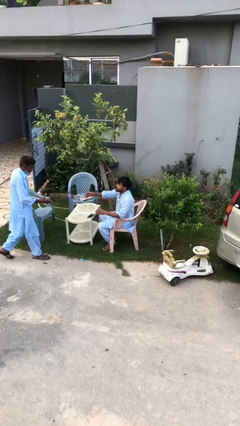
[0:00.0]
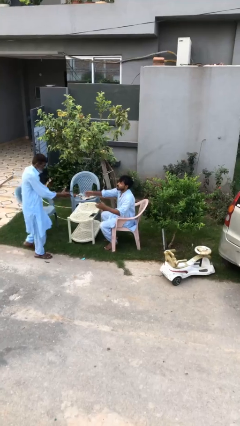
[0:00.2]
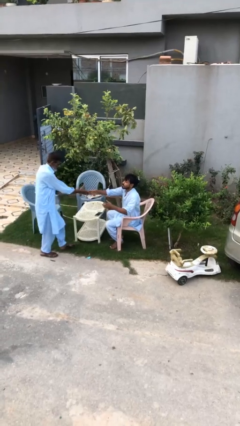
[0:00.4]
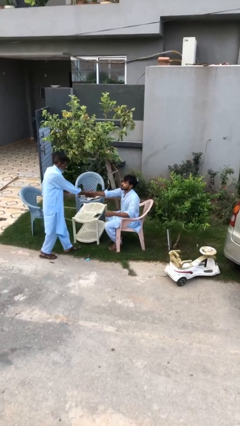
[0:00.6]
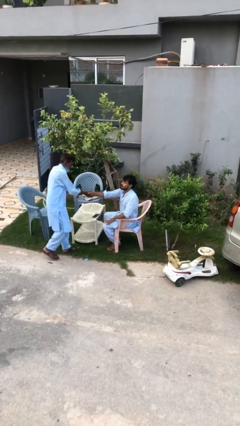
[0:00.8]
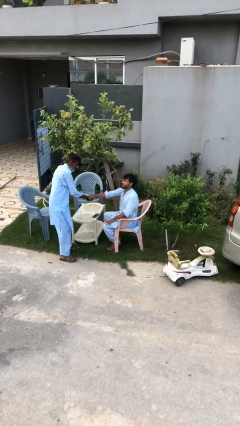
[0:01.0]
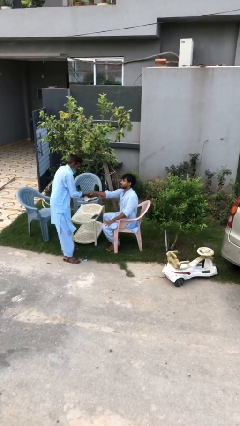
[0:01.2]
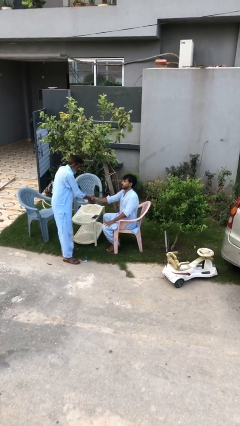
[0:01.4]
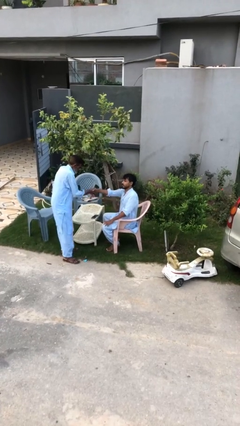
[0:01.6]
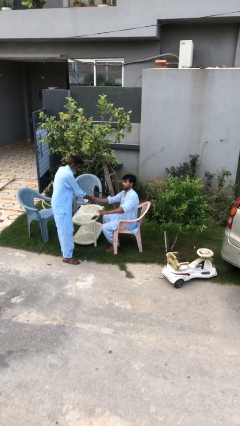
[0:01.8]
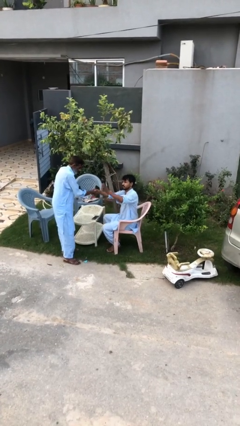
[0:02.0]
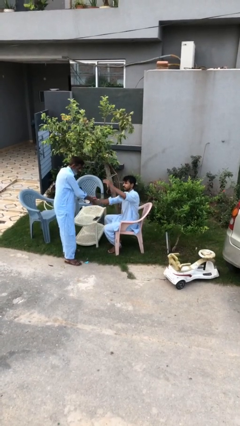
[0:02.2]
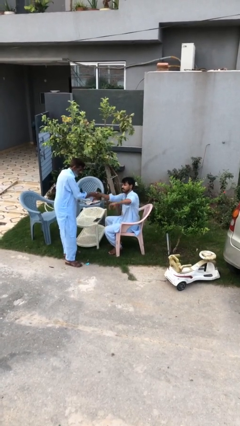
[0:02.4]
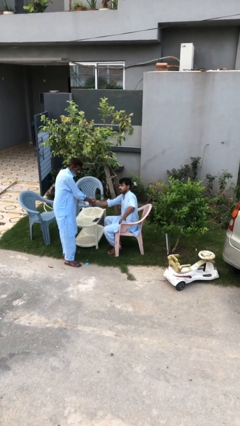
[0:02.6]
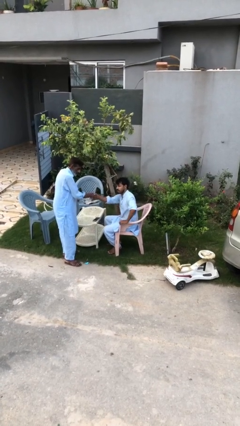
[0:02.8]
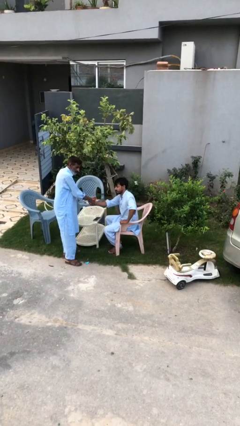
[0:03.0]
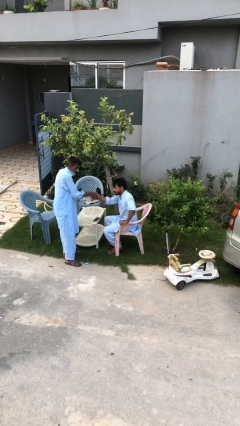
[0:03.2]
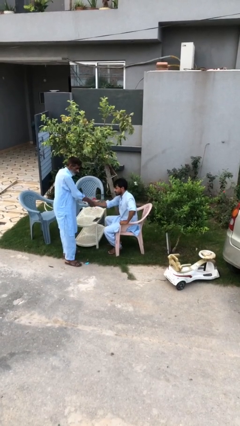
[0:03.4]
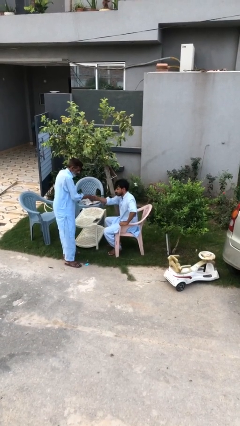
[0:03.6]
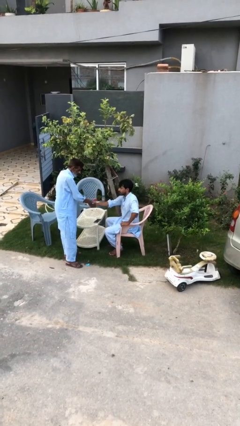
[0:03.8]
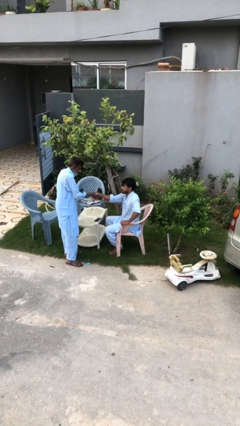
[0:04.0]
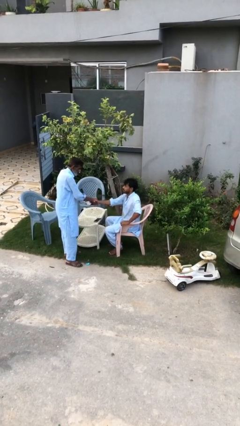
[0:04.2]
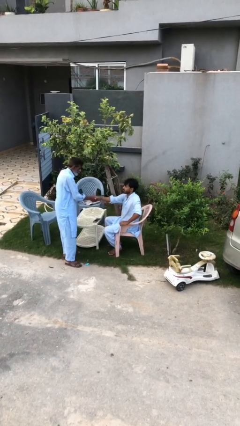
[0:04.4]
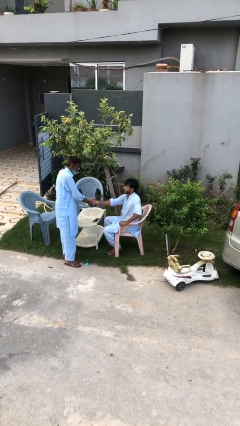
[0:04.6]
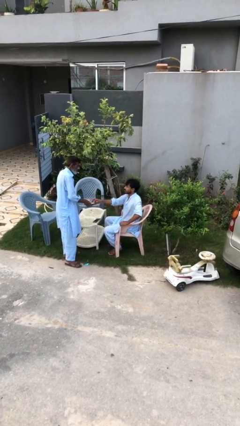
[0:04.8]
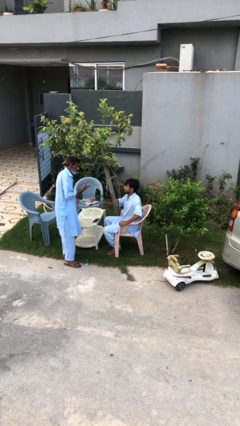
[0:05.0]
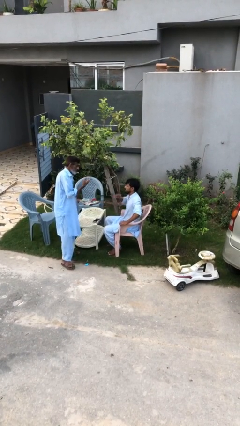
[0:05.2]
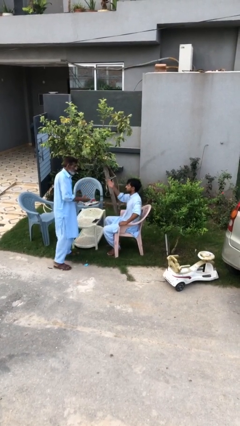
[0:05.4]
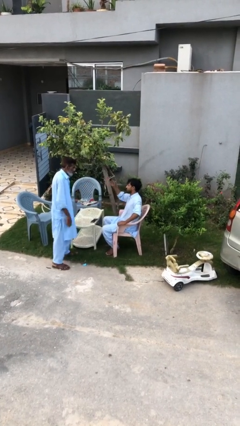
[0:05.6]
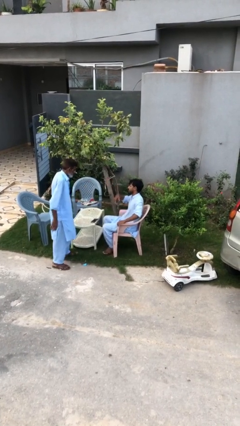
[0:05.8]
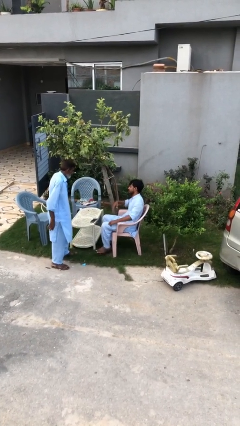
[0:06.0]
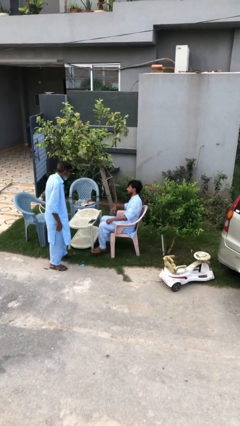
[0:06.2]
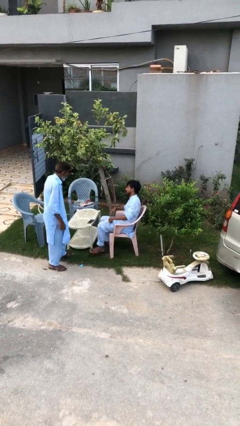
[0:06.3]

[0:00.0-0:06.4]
person shakes hand

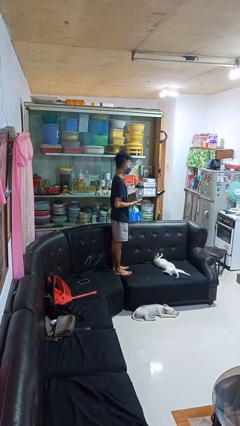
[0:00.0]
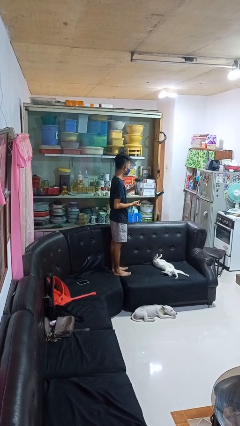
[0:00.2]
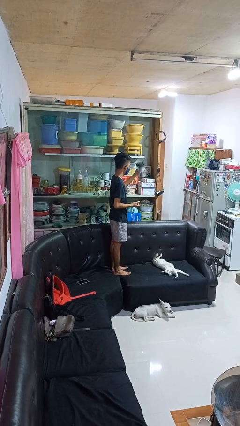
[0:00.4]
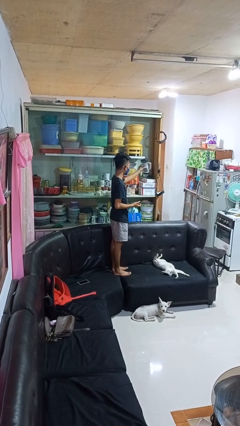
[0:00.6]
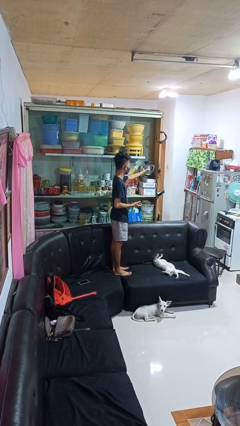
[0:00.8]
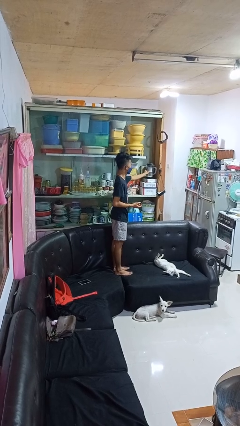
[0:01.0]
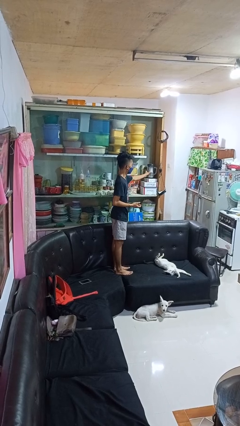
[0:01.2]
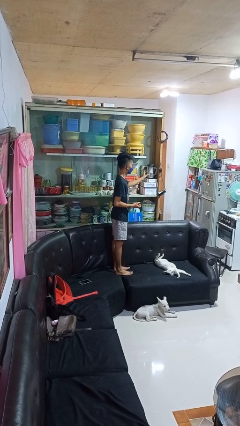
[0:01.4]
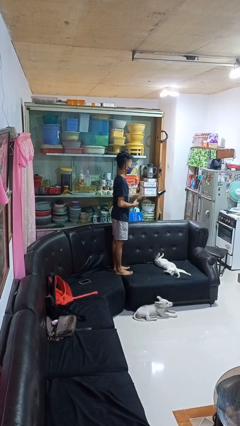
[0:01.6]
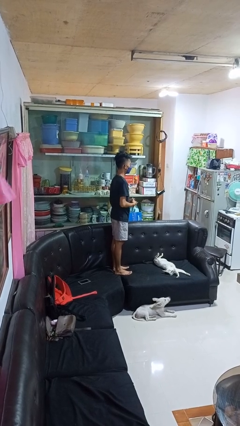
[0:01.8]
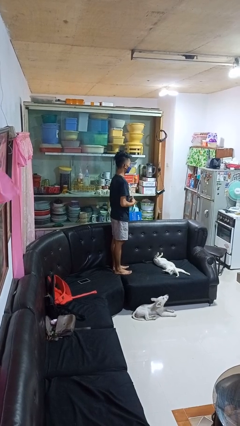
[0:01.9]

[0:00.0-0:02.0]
person puts down object into cabinet

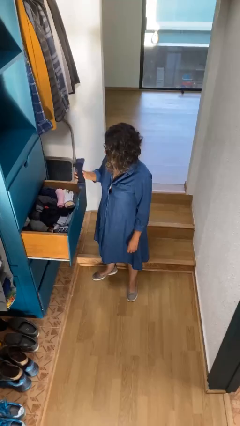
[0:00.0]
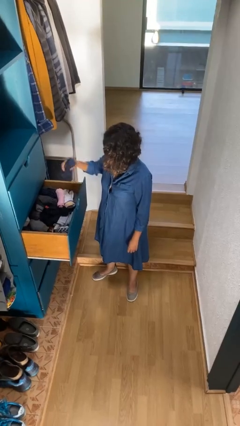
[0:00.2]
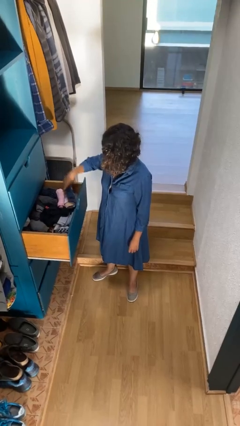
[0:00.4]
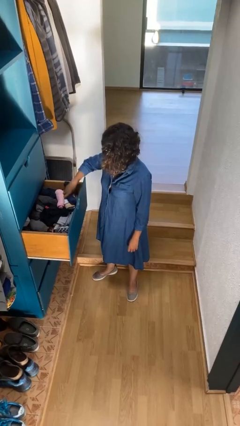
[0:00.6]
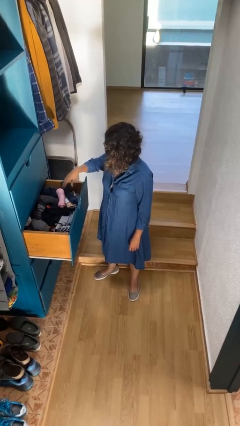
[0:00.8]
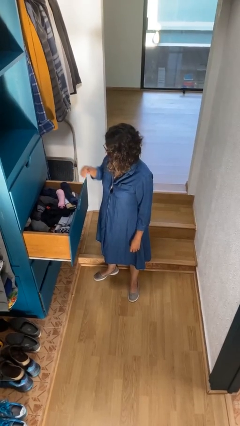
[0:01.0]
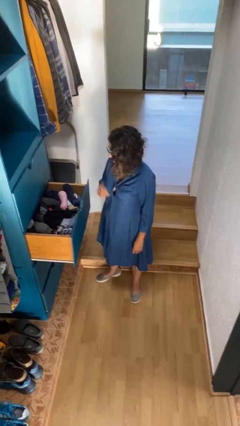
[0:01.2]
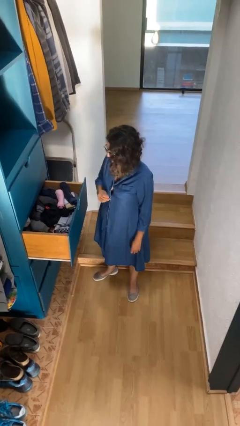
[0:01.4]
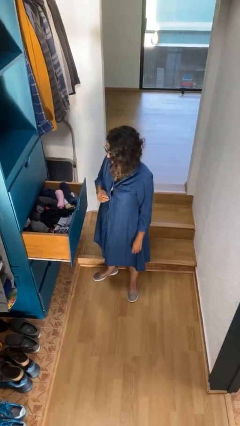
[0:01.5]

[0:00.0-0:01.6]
person puts clothes into dresser

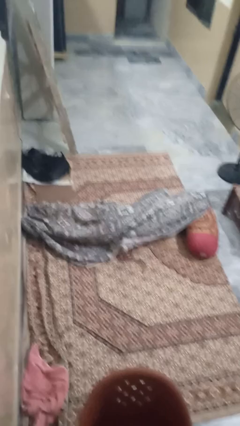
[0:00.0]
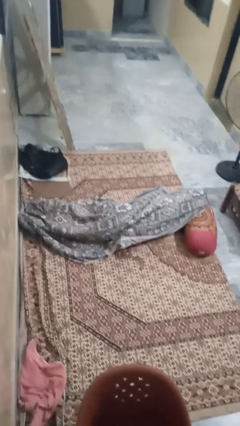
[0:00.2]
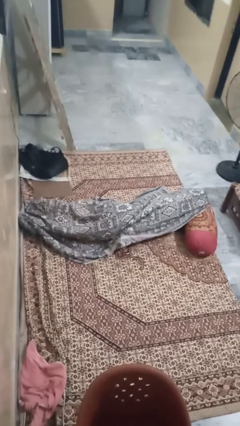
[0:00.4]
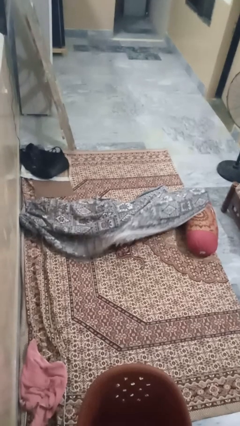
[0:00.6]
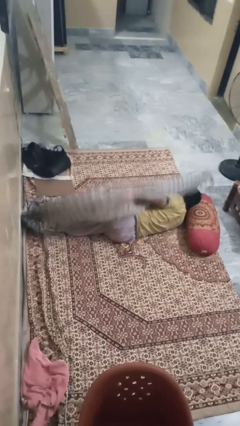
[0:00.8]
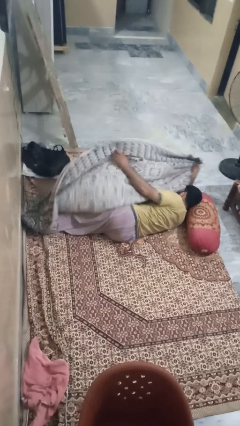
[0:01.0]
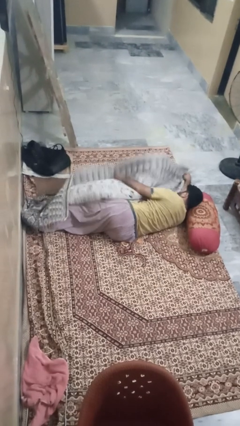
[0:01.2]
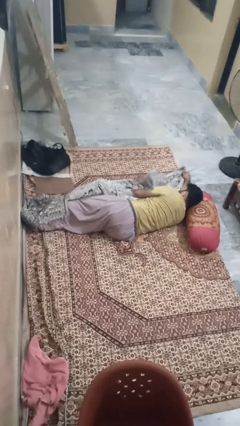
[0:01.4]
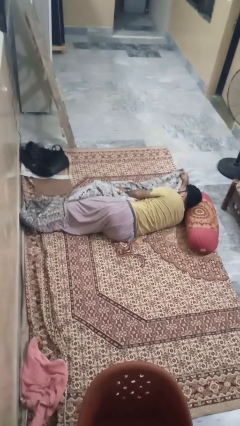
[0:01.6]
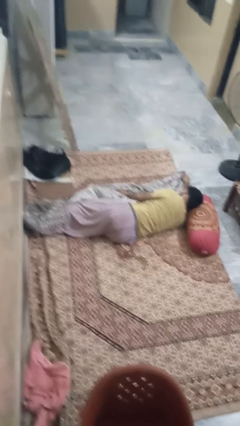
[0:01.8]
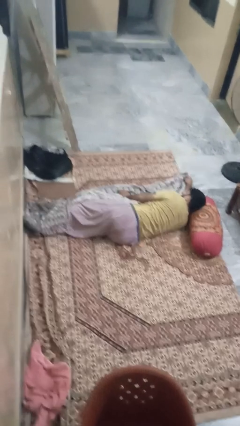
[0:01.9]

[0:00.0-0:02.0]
person uncovers with blanket

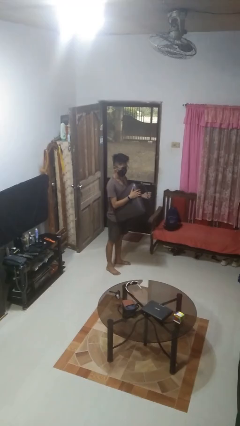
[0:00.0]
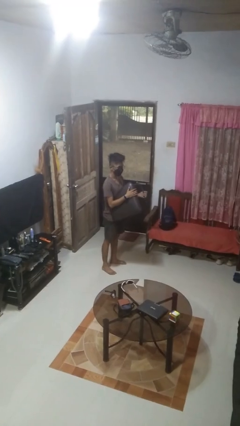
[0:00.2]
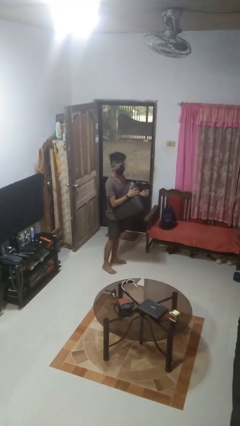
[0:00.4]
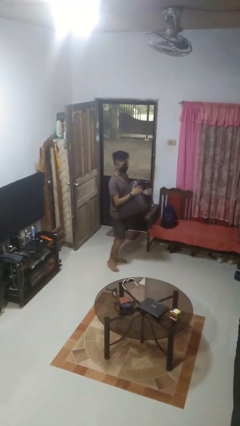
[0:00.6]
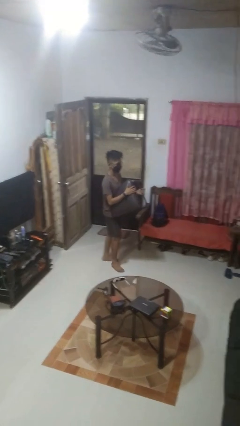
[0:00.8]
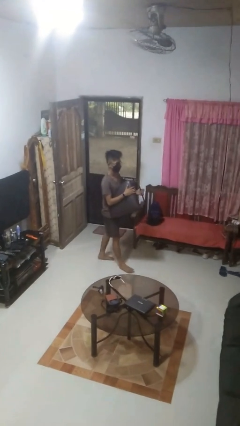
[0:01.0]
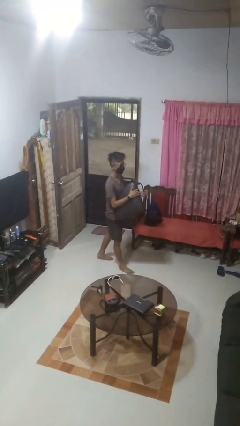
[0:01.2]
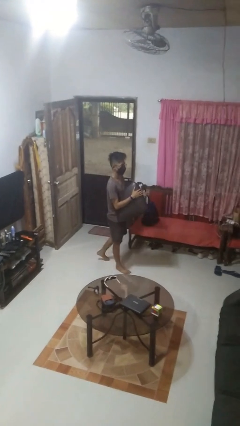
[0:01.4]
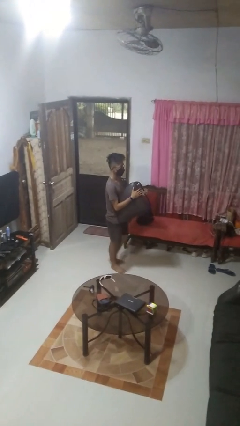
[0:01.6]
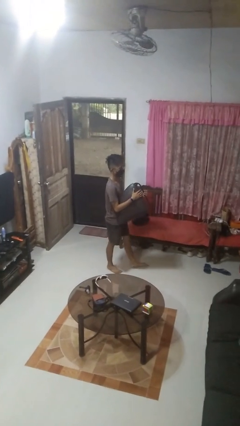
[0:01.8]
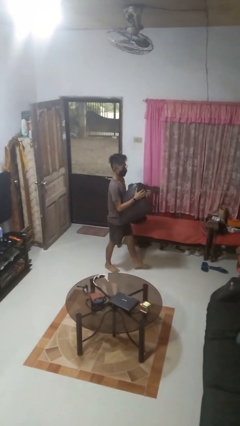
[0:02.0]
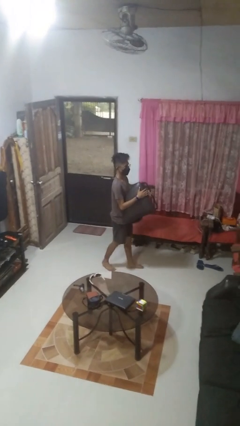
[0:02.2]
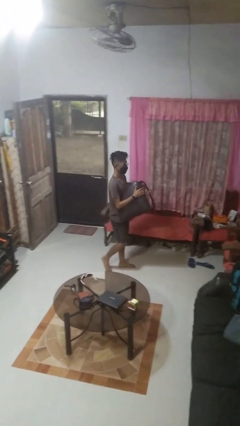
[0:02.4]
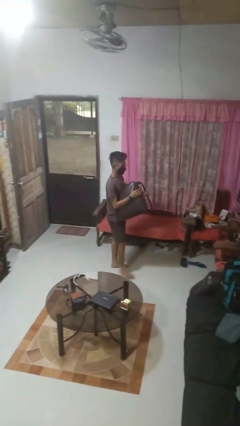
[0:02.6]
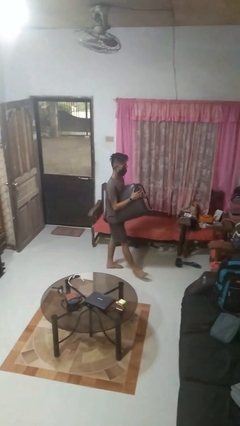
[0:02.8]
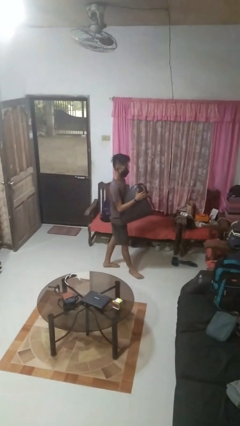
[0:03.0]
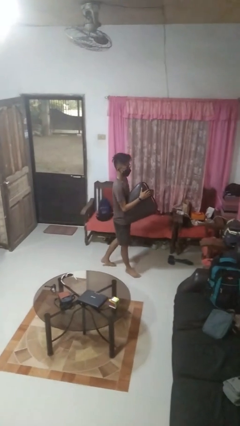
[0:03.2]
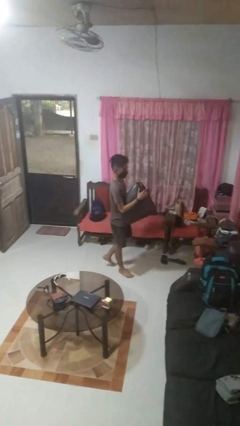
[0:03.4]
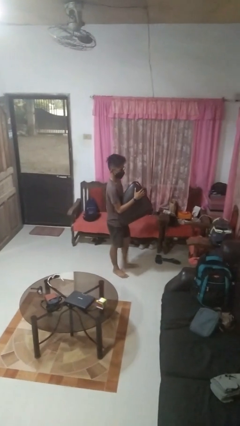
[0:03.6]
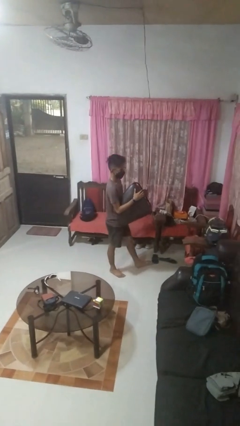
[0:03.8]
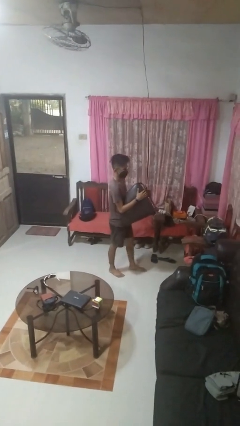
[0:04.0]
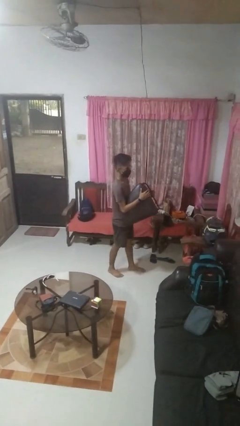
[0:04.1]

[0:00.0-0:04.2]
person carries furniture

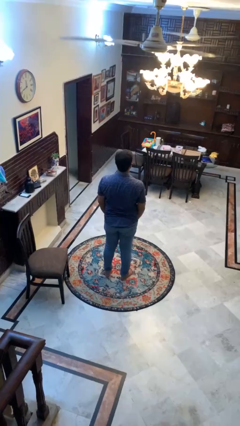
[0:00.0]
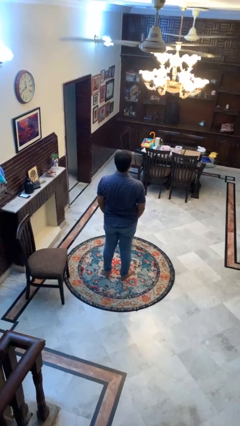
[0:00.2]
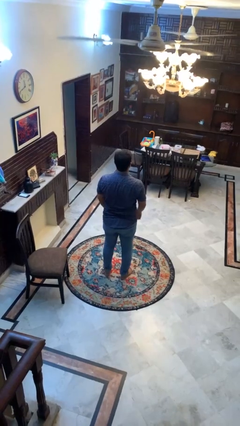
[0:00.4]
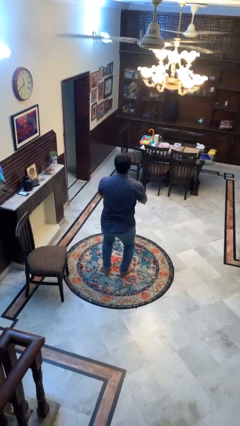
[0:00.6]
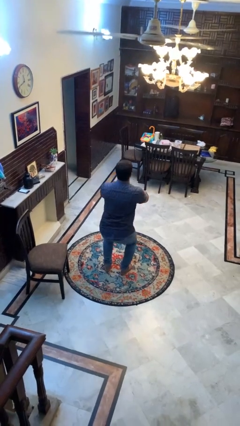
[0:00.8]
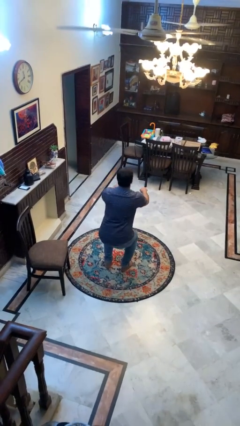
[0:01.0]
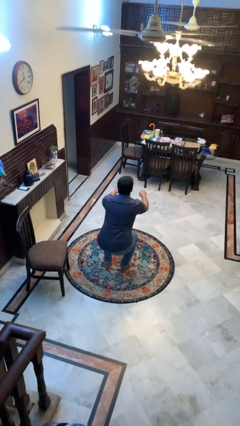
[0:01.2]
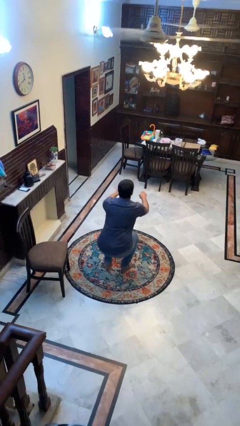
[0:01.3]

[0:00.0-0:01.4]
person squats
